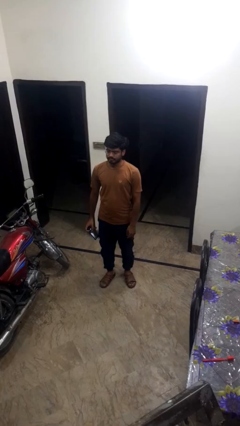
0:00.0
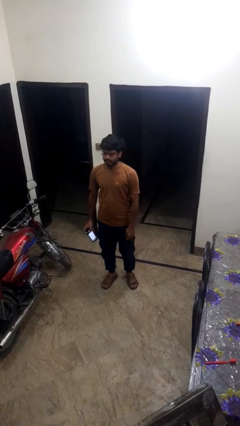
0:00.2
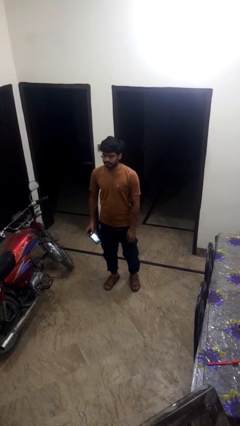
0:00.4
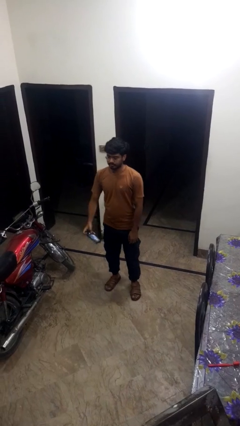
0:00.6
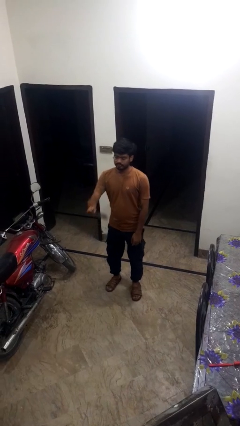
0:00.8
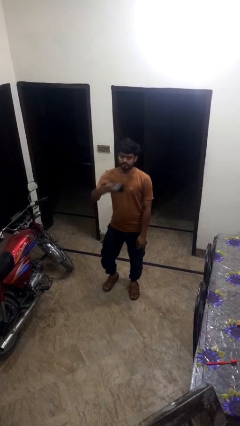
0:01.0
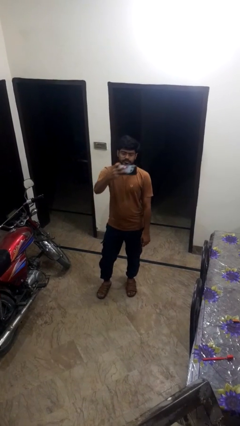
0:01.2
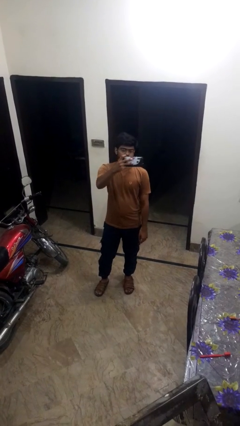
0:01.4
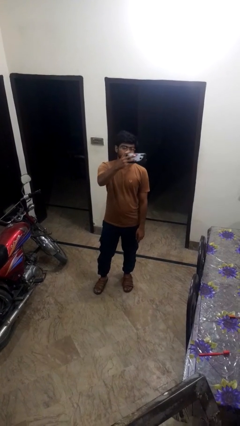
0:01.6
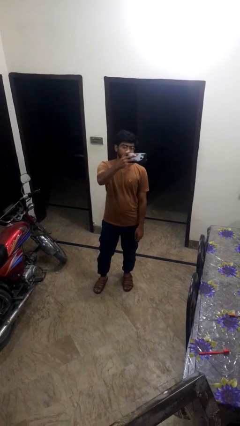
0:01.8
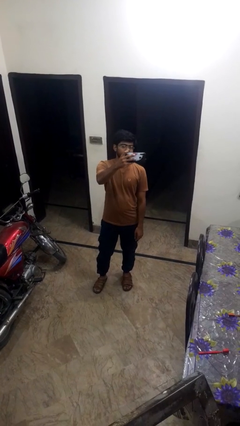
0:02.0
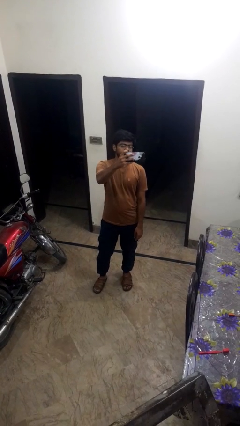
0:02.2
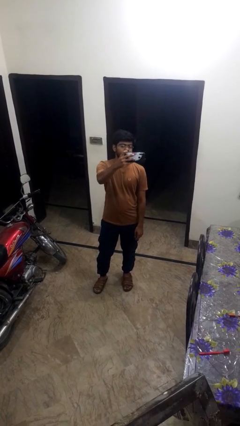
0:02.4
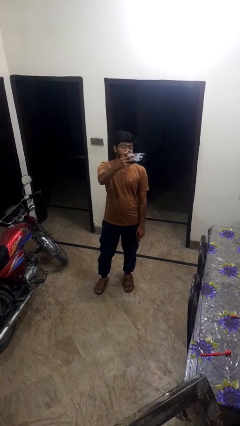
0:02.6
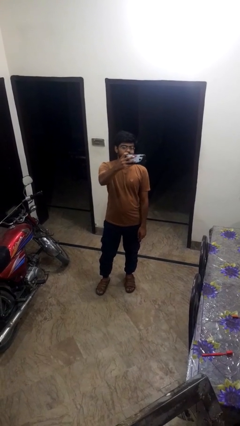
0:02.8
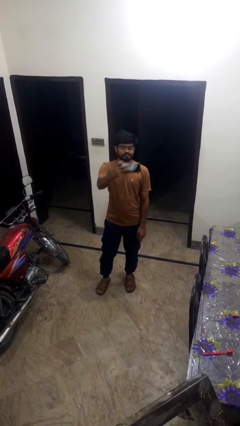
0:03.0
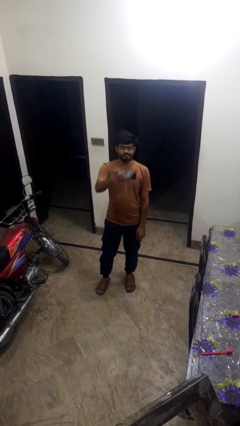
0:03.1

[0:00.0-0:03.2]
person takes selfie

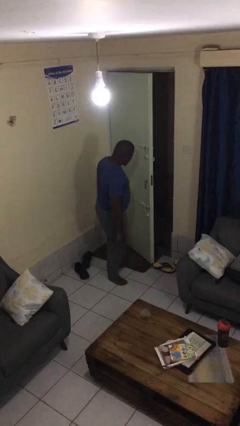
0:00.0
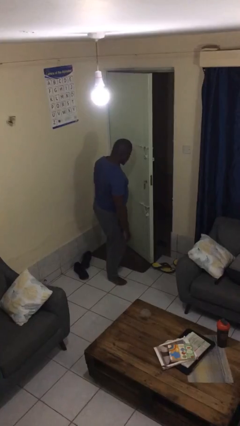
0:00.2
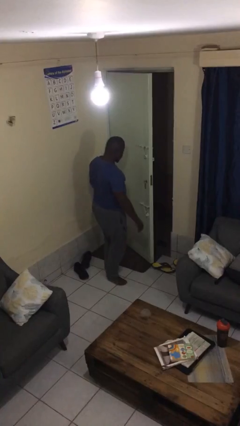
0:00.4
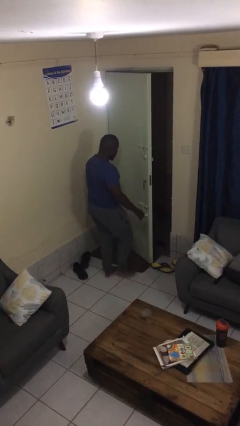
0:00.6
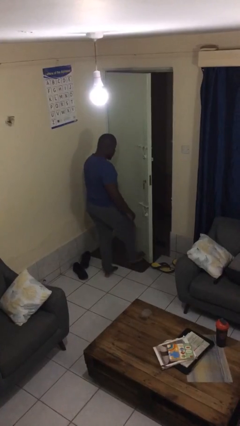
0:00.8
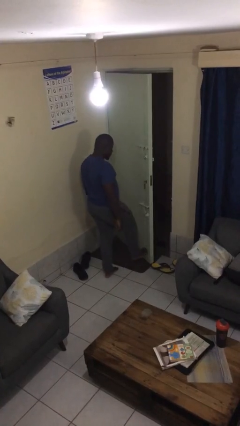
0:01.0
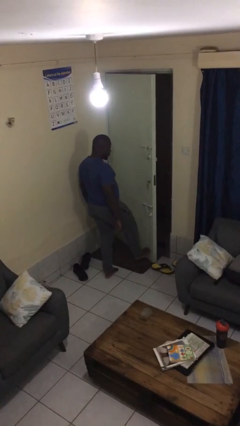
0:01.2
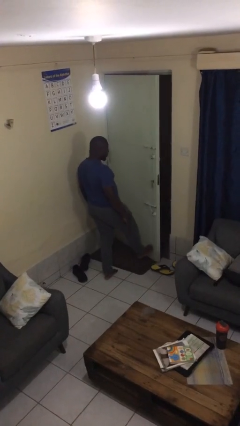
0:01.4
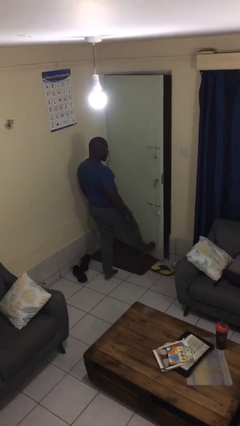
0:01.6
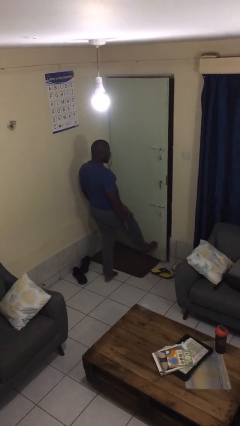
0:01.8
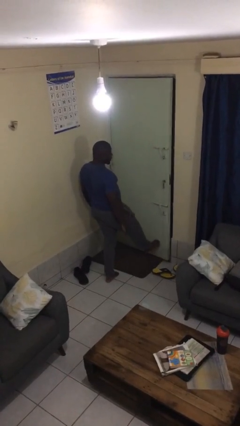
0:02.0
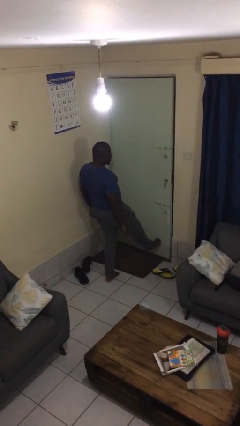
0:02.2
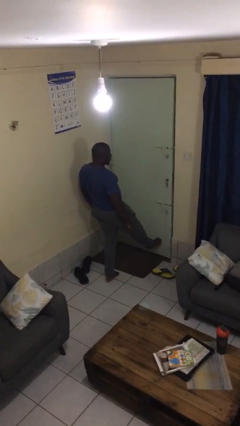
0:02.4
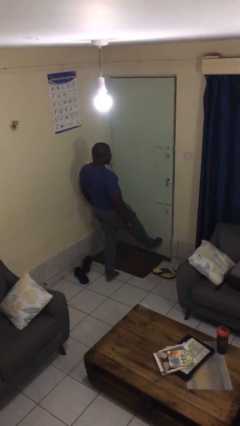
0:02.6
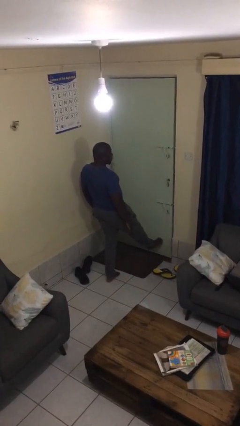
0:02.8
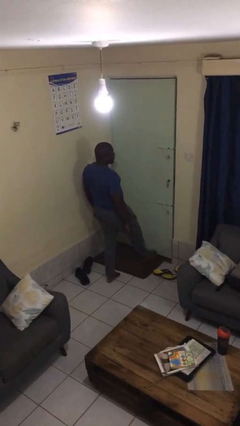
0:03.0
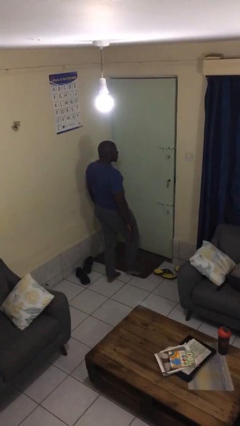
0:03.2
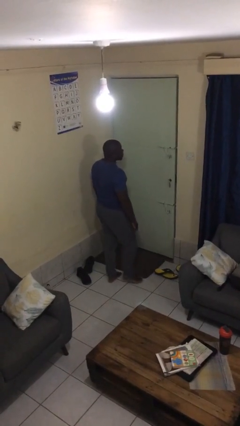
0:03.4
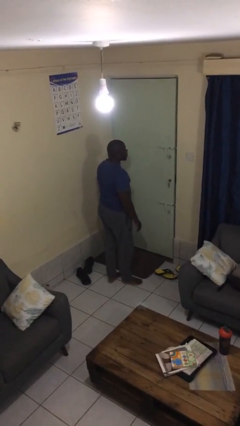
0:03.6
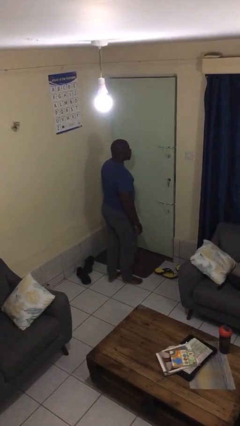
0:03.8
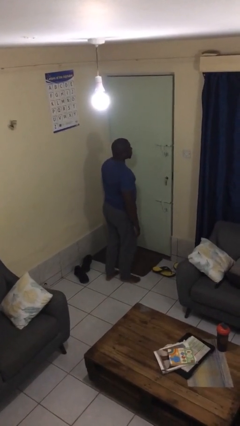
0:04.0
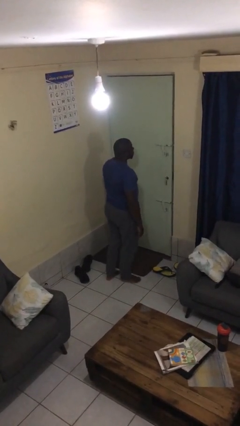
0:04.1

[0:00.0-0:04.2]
person closes door with foot

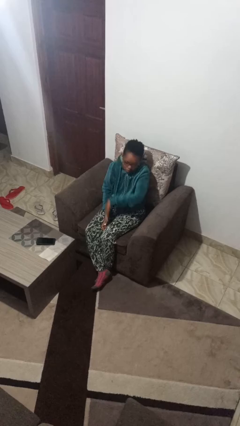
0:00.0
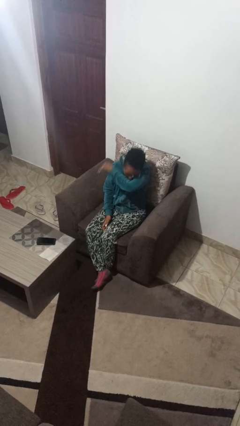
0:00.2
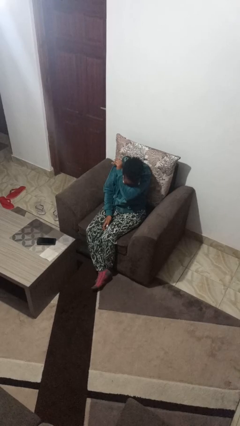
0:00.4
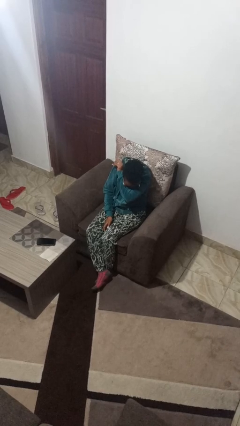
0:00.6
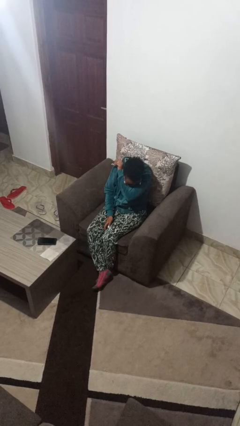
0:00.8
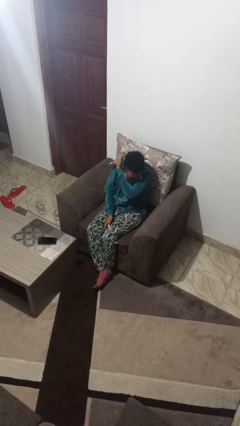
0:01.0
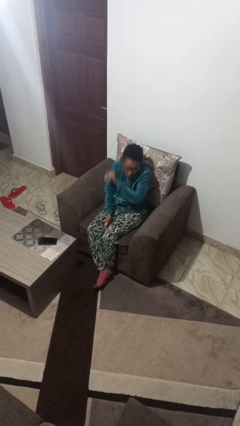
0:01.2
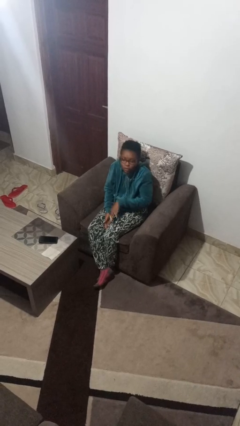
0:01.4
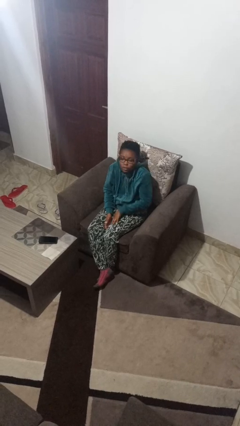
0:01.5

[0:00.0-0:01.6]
person sneezes into arm

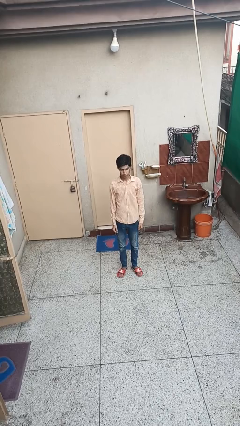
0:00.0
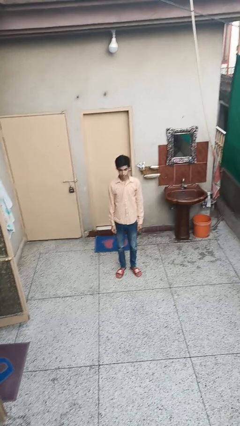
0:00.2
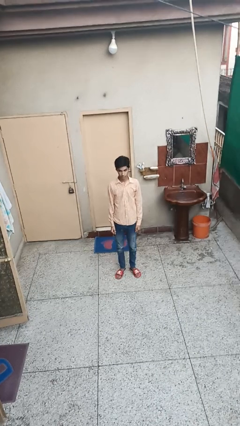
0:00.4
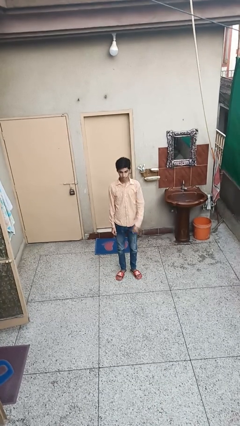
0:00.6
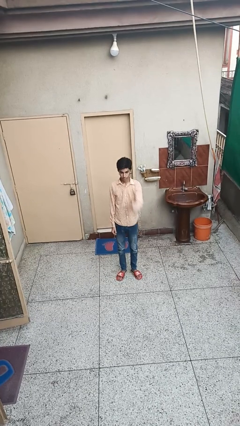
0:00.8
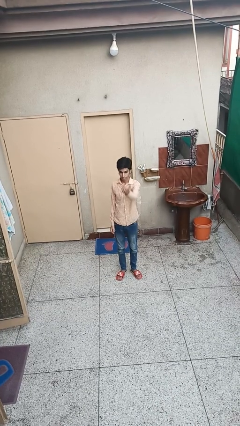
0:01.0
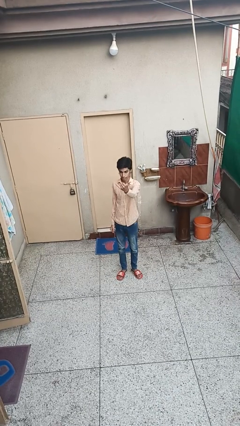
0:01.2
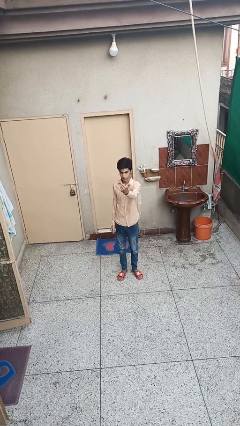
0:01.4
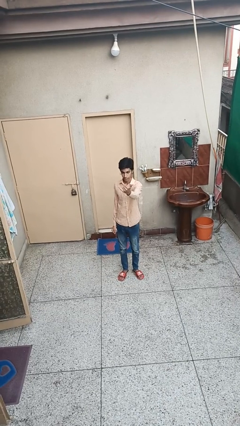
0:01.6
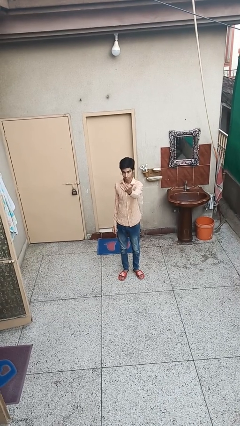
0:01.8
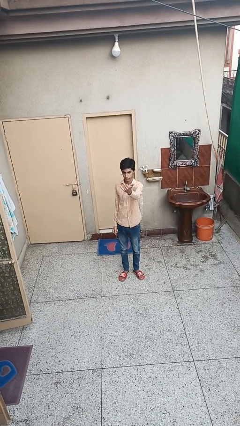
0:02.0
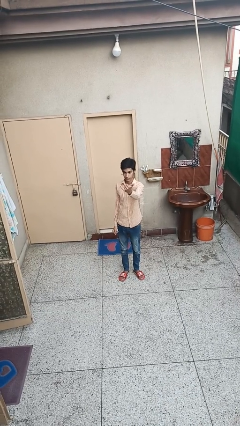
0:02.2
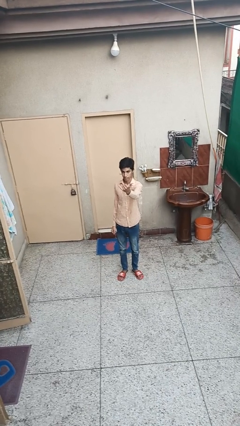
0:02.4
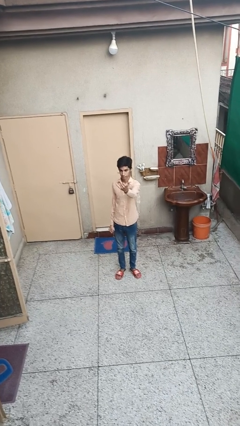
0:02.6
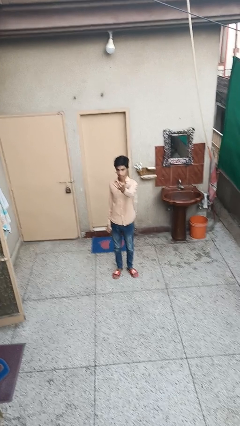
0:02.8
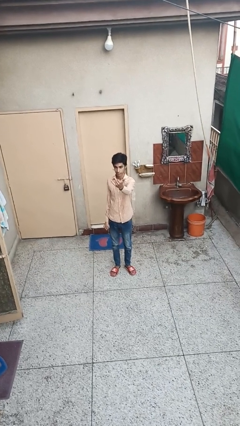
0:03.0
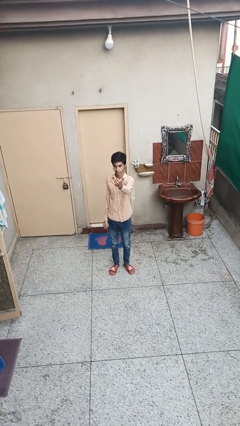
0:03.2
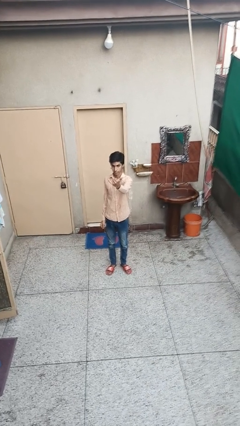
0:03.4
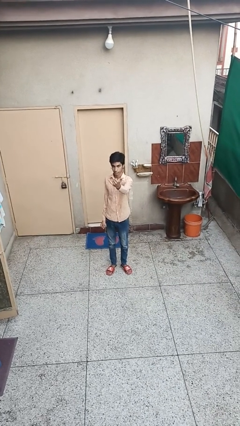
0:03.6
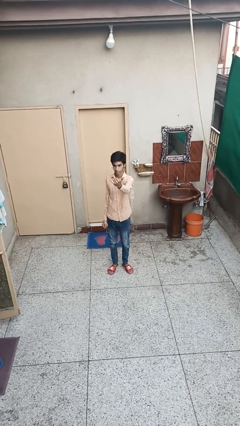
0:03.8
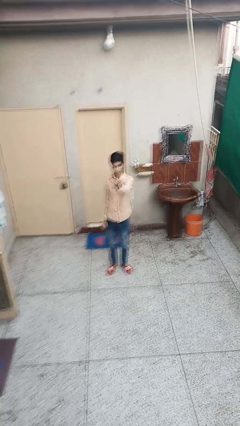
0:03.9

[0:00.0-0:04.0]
person gestures hang loose

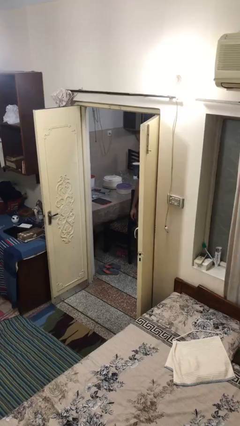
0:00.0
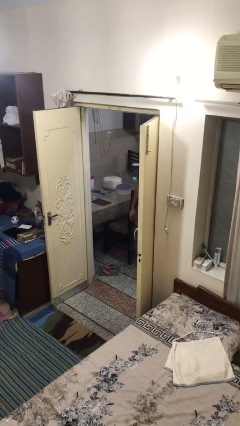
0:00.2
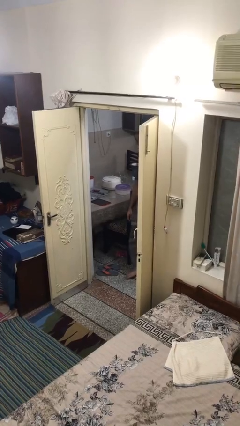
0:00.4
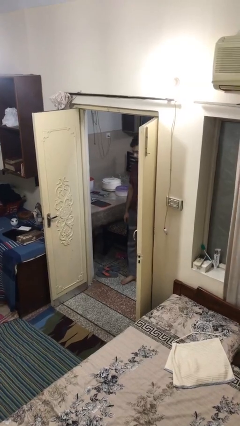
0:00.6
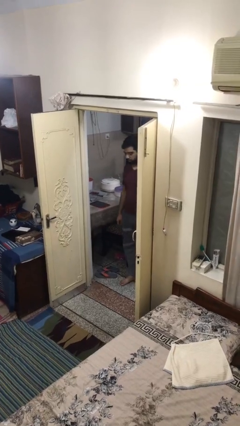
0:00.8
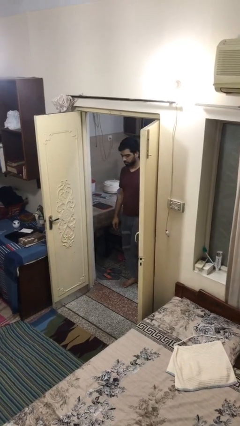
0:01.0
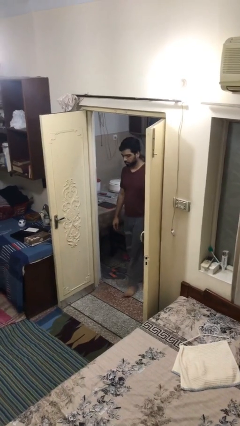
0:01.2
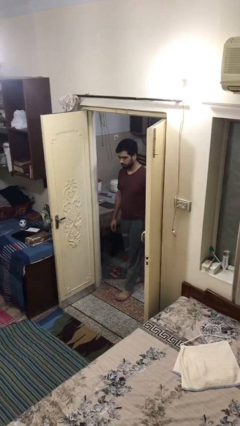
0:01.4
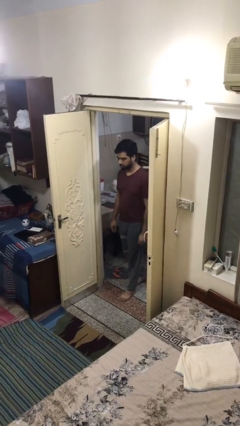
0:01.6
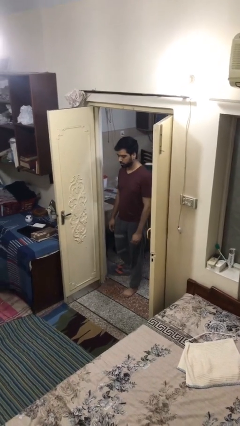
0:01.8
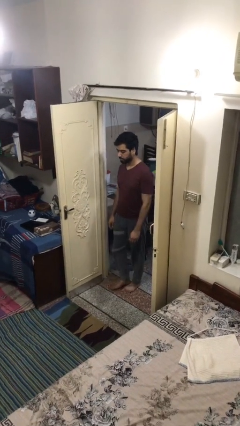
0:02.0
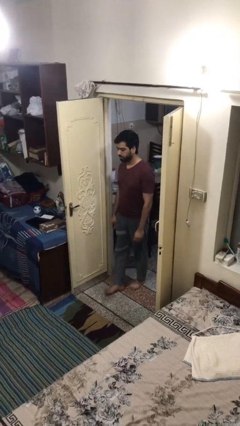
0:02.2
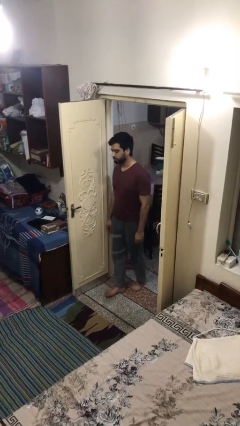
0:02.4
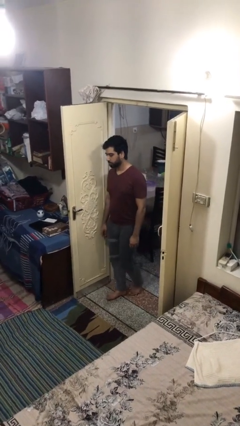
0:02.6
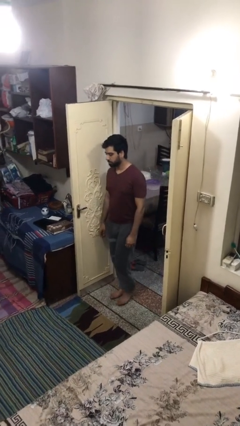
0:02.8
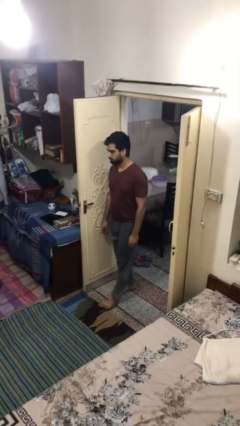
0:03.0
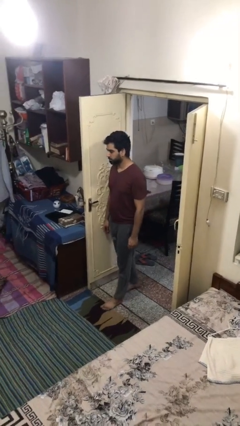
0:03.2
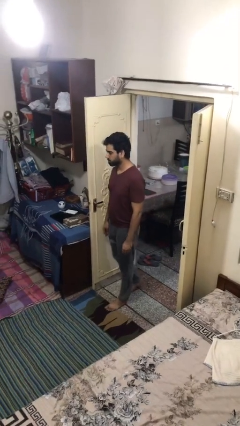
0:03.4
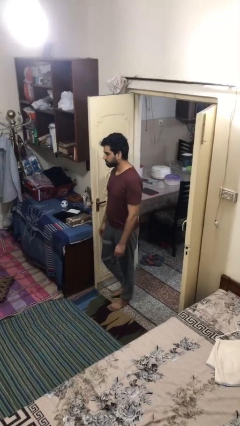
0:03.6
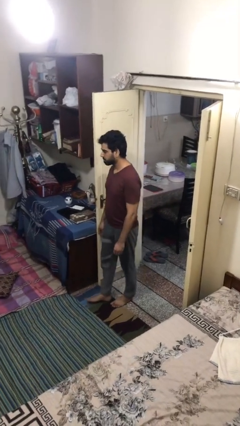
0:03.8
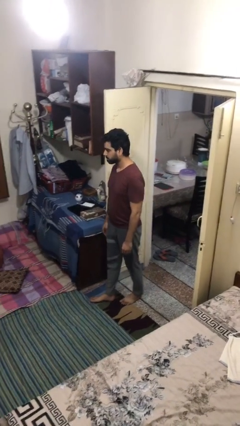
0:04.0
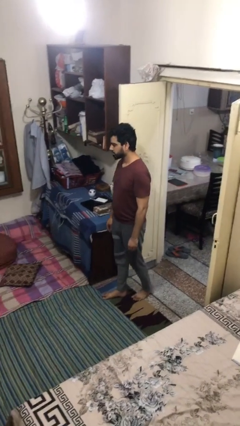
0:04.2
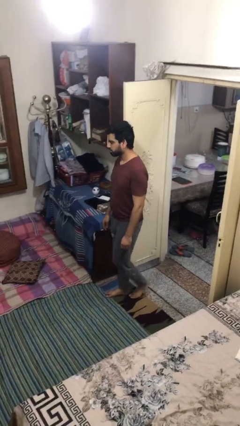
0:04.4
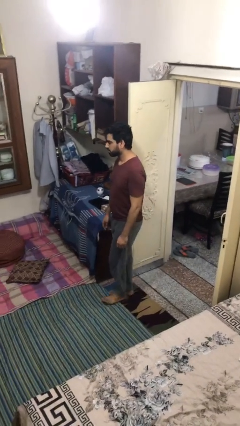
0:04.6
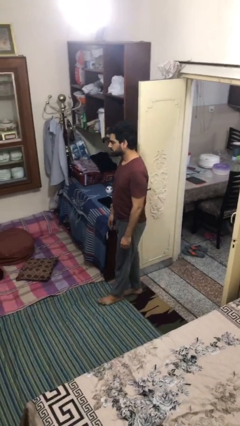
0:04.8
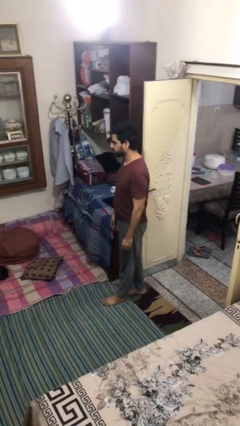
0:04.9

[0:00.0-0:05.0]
person enters scene through structure
